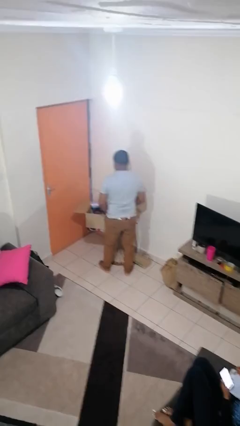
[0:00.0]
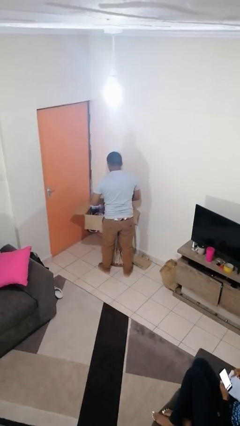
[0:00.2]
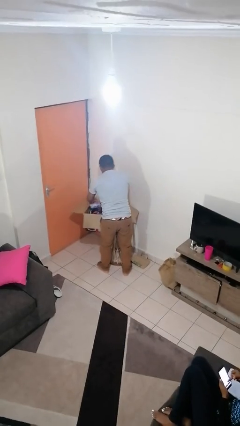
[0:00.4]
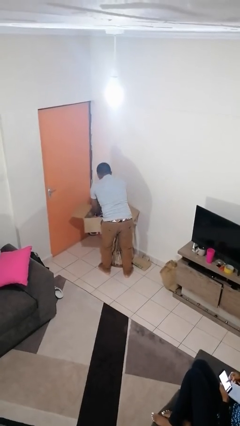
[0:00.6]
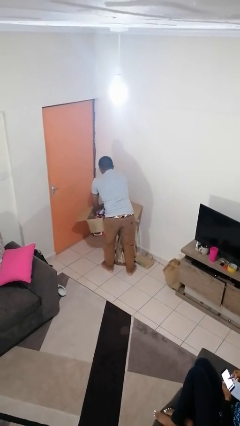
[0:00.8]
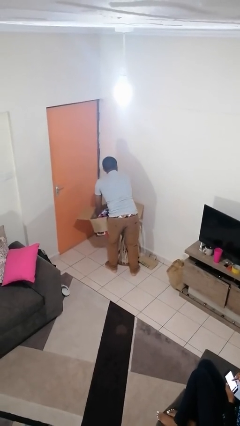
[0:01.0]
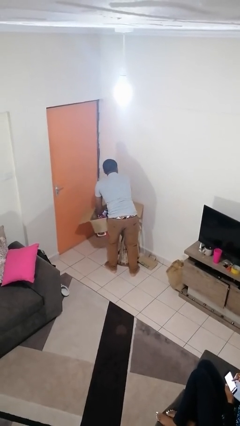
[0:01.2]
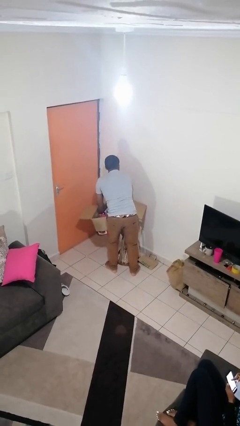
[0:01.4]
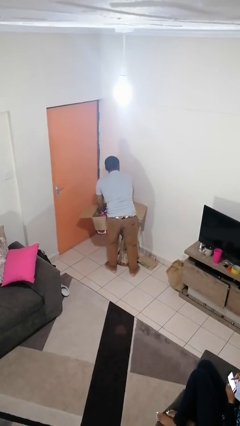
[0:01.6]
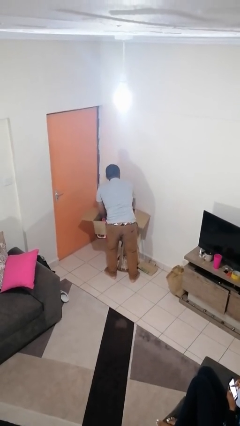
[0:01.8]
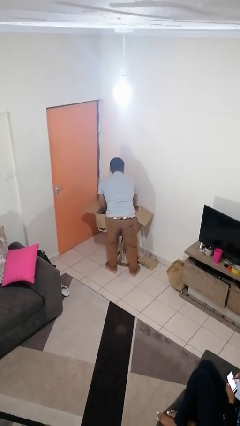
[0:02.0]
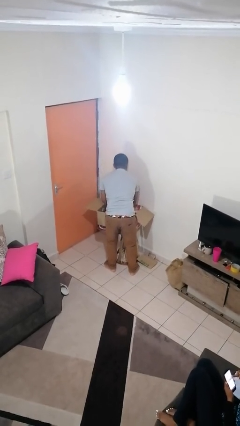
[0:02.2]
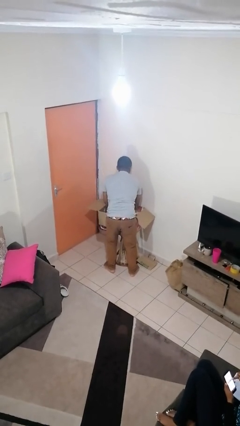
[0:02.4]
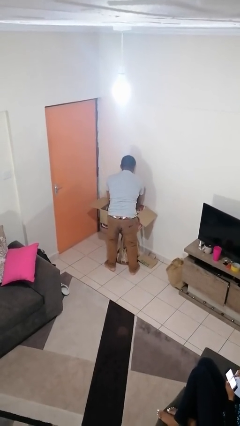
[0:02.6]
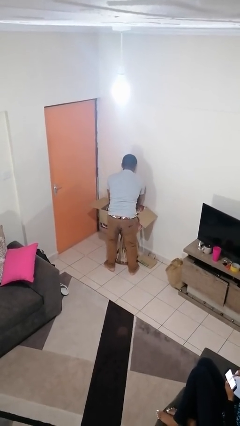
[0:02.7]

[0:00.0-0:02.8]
person searches in box

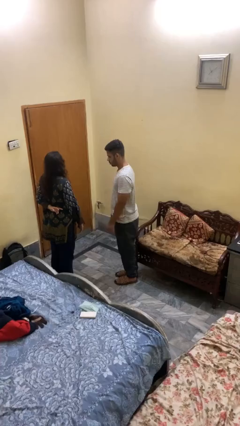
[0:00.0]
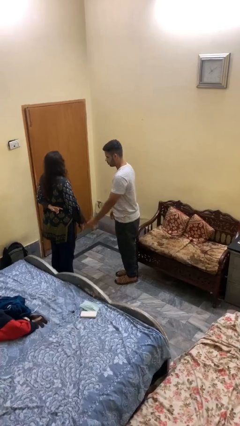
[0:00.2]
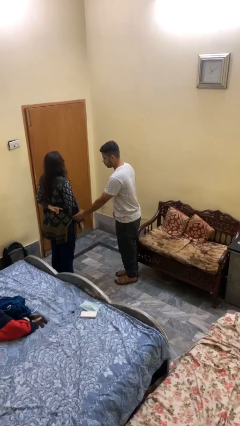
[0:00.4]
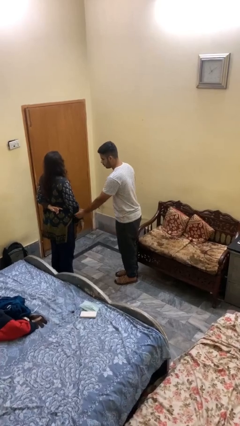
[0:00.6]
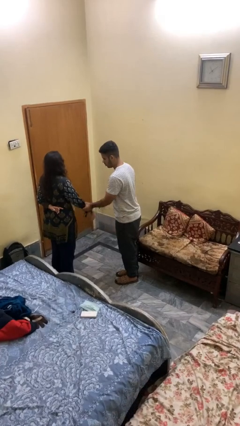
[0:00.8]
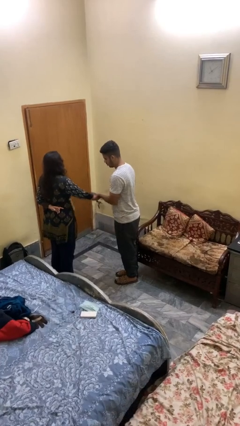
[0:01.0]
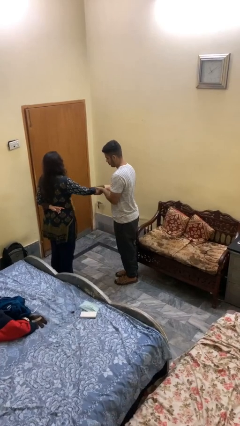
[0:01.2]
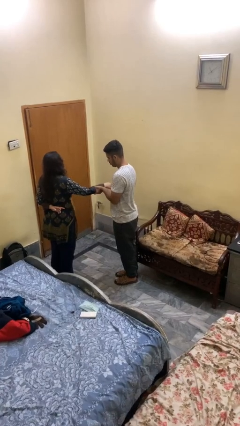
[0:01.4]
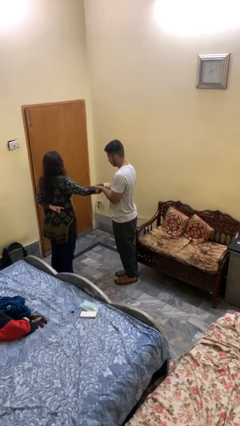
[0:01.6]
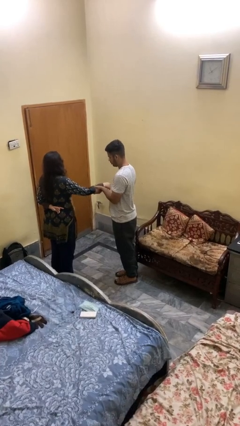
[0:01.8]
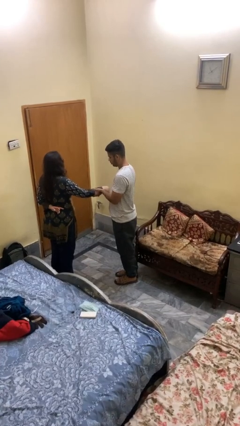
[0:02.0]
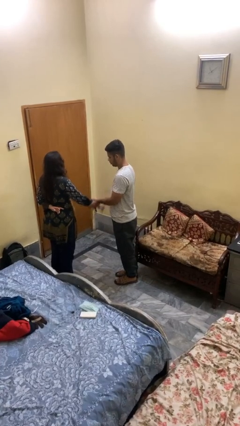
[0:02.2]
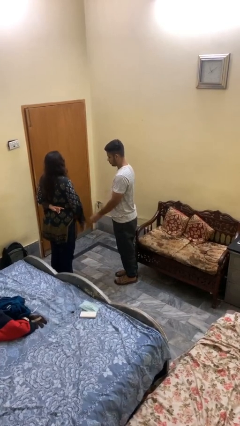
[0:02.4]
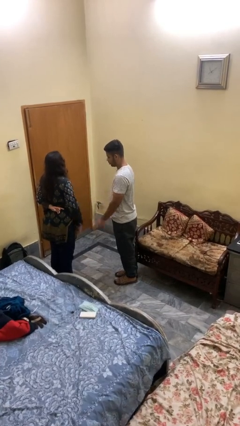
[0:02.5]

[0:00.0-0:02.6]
person grabs person by forearm

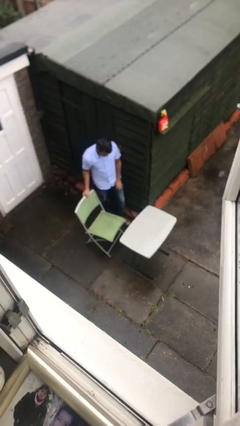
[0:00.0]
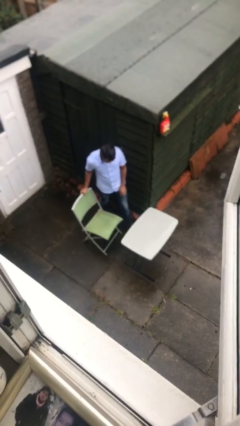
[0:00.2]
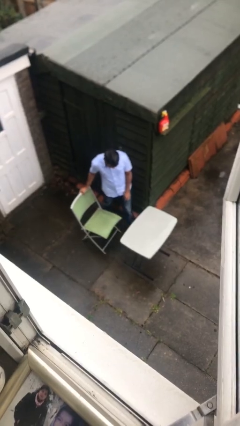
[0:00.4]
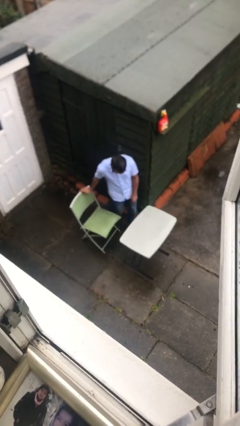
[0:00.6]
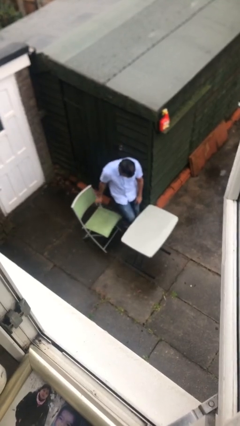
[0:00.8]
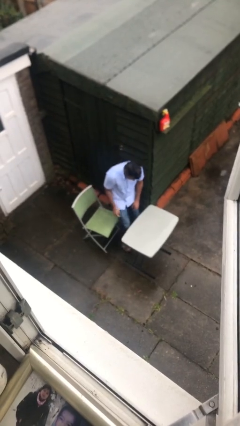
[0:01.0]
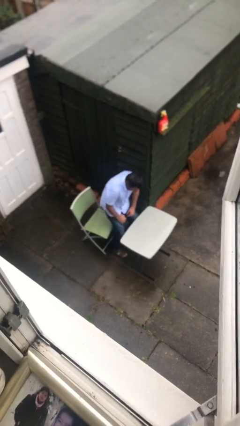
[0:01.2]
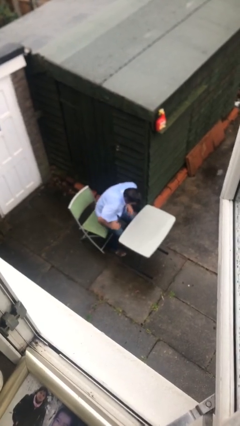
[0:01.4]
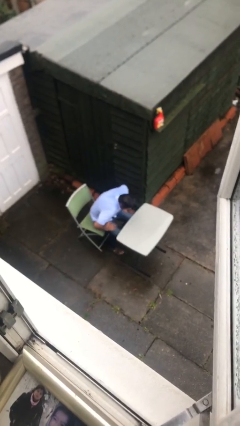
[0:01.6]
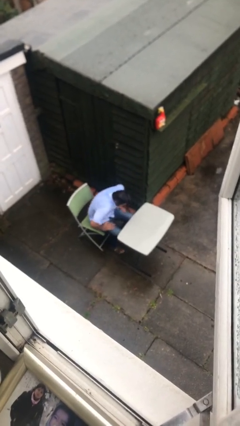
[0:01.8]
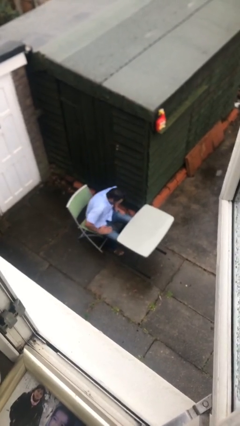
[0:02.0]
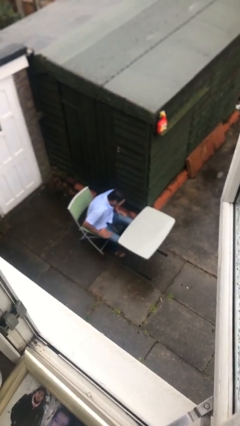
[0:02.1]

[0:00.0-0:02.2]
person sits down

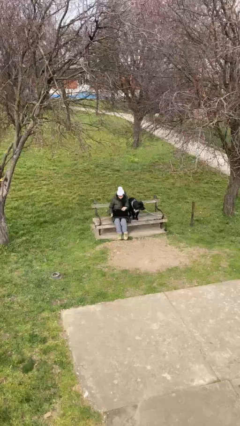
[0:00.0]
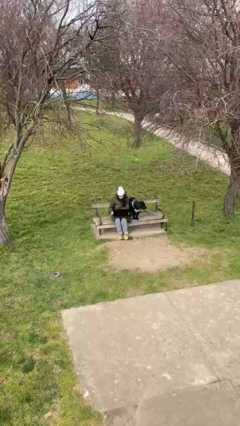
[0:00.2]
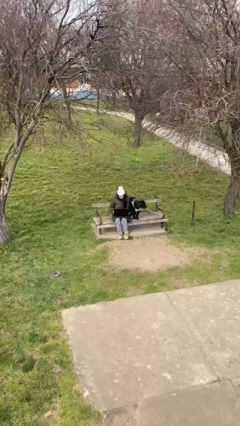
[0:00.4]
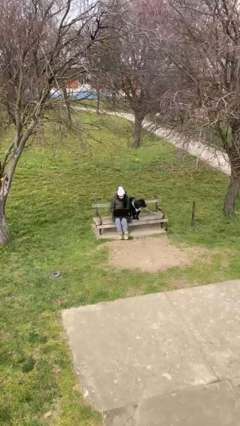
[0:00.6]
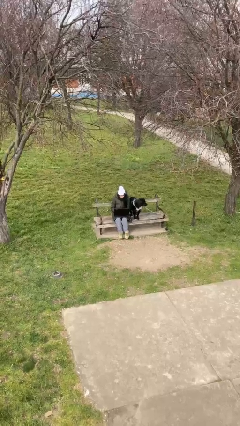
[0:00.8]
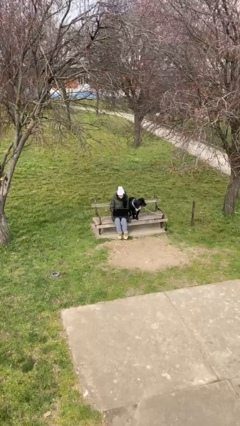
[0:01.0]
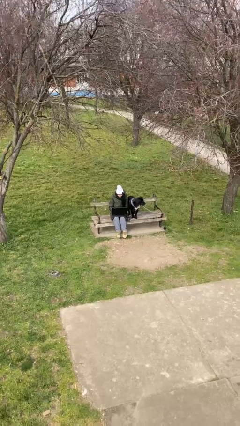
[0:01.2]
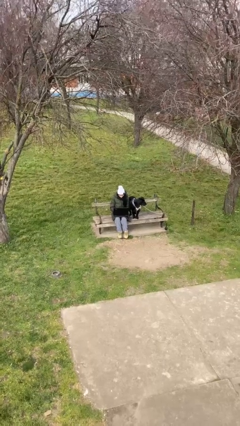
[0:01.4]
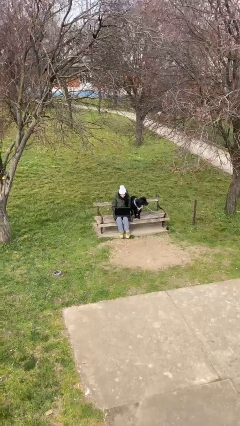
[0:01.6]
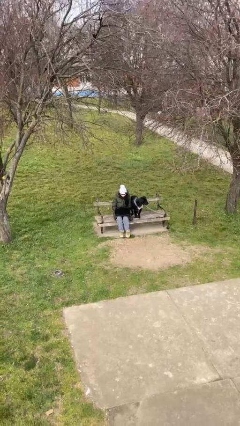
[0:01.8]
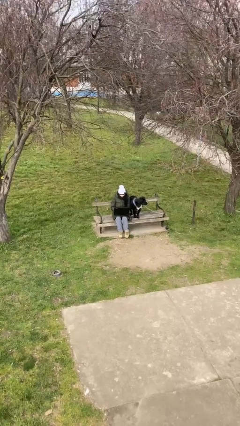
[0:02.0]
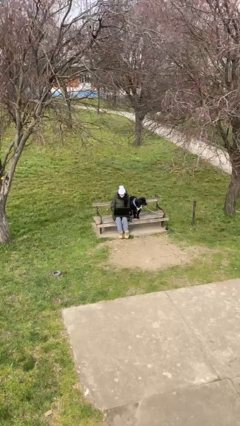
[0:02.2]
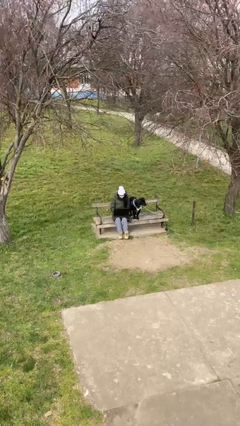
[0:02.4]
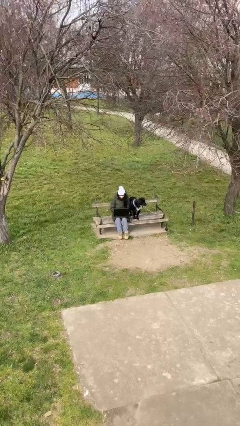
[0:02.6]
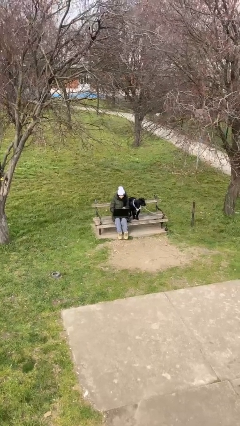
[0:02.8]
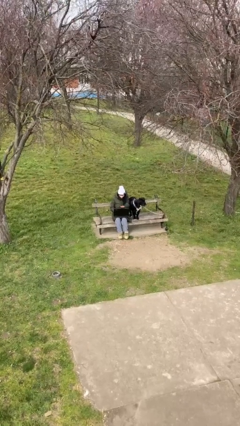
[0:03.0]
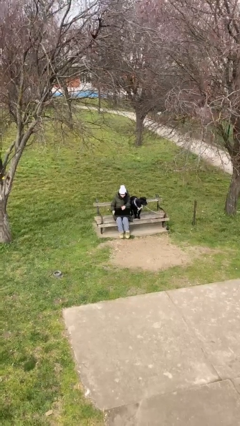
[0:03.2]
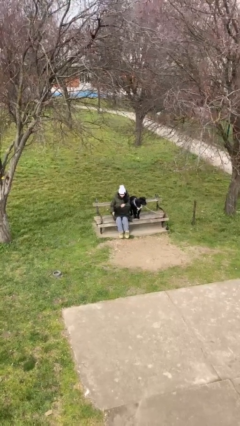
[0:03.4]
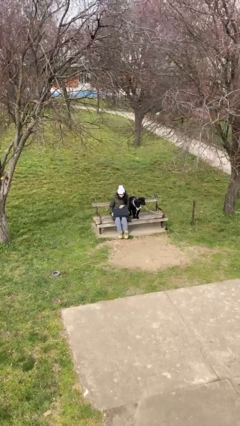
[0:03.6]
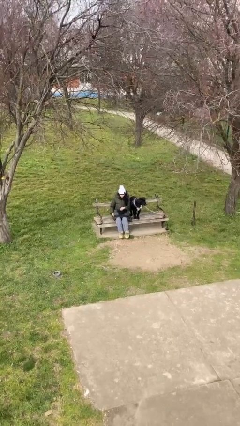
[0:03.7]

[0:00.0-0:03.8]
person interacts with laptop

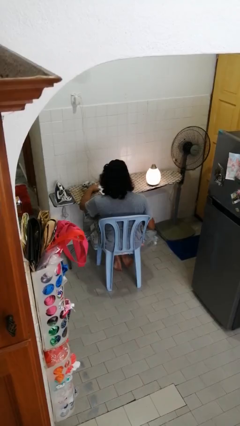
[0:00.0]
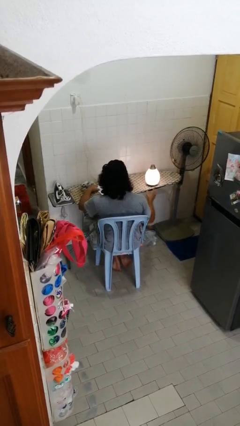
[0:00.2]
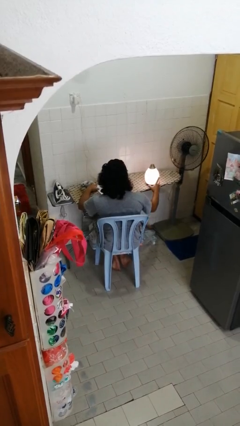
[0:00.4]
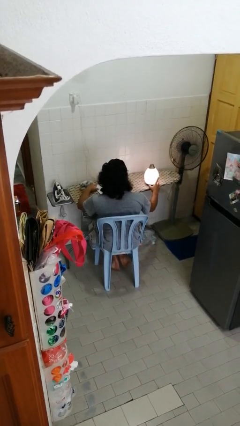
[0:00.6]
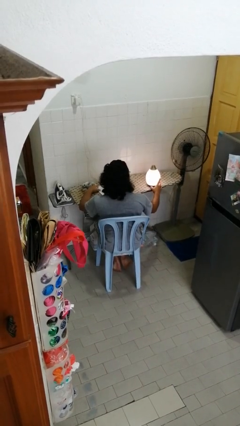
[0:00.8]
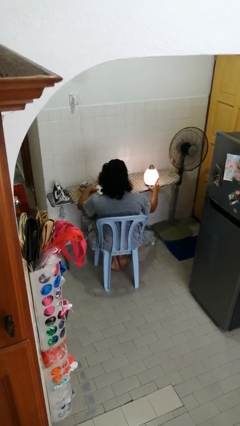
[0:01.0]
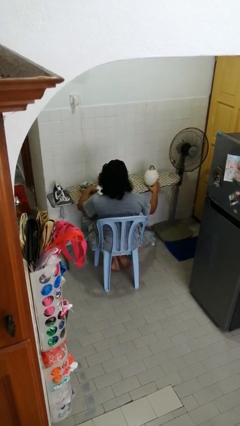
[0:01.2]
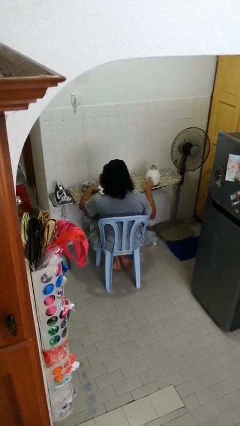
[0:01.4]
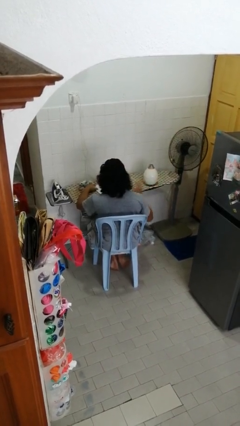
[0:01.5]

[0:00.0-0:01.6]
person turns off lamp

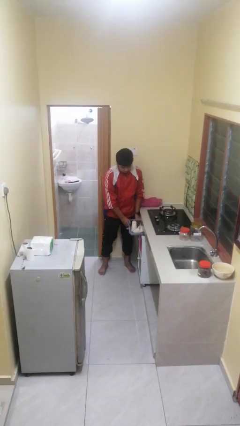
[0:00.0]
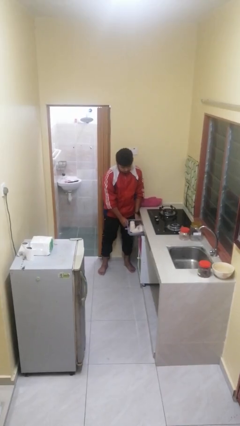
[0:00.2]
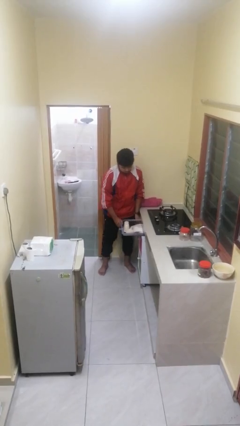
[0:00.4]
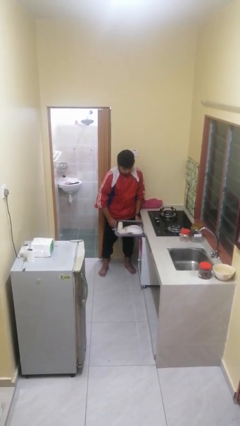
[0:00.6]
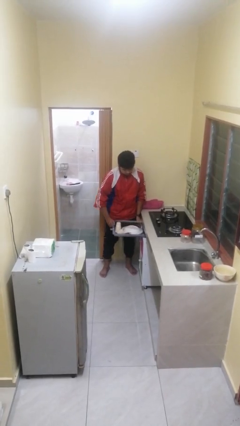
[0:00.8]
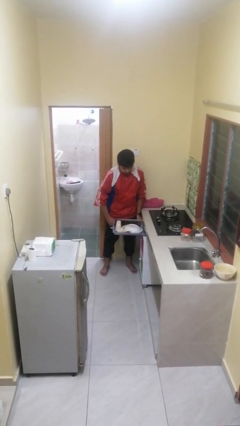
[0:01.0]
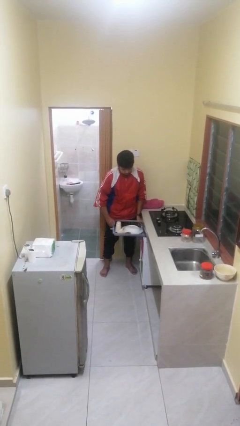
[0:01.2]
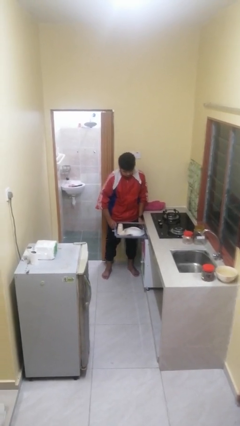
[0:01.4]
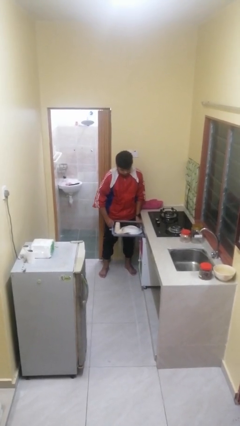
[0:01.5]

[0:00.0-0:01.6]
person opens kitchen drawer

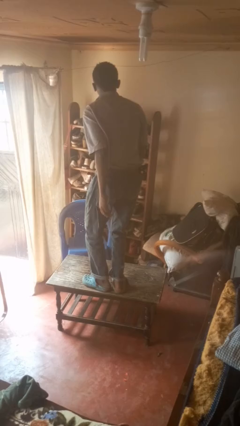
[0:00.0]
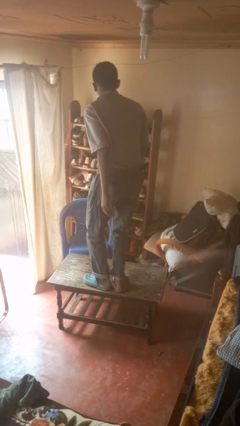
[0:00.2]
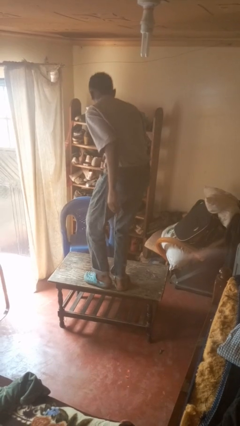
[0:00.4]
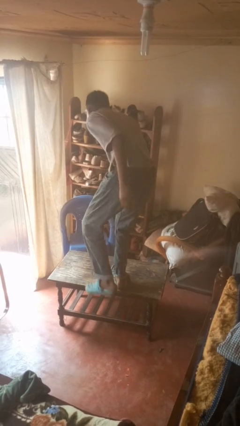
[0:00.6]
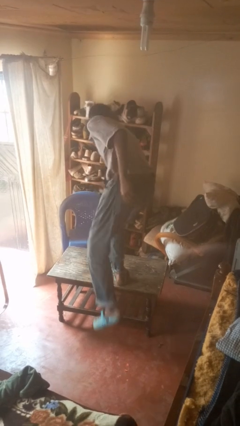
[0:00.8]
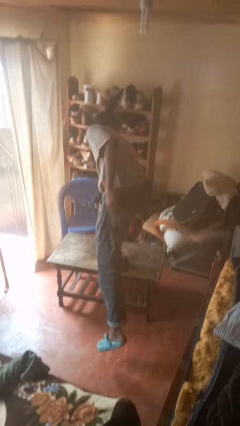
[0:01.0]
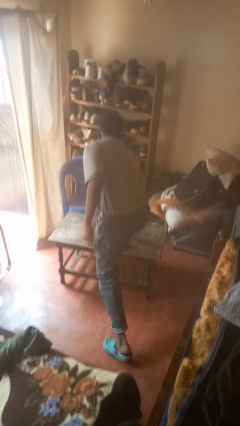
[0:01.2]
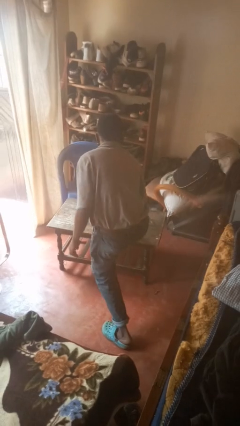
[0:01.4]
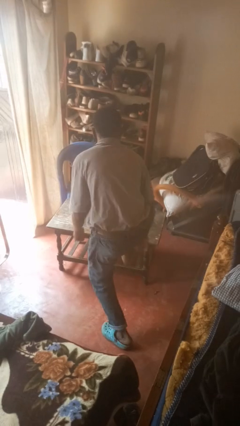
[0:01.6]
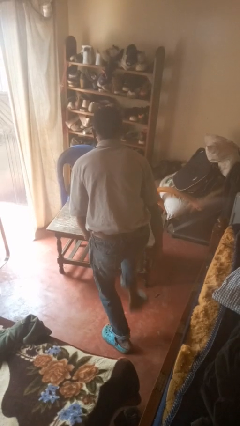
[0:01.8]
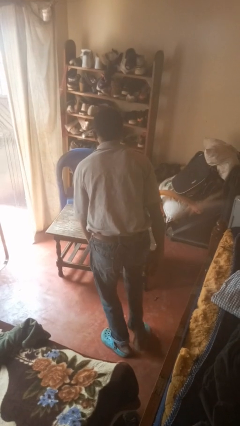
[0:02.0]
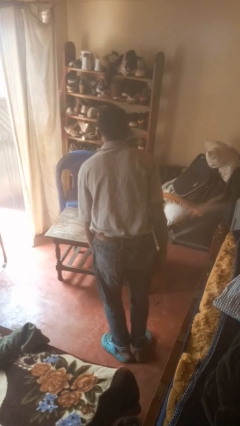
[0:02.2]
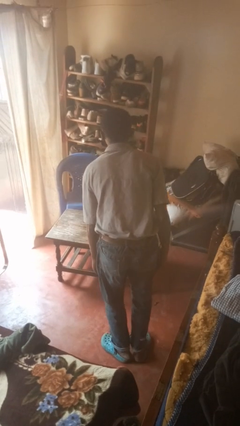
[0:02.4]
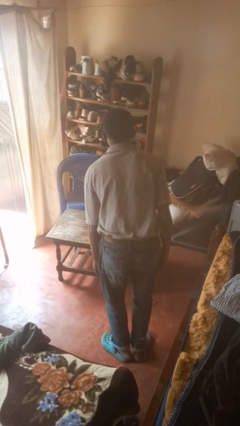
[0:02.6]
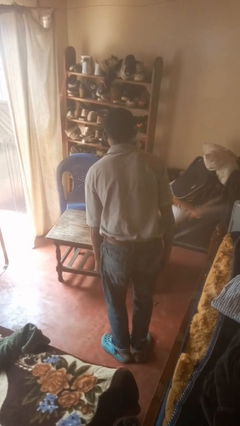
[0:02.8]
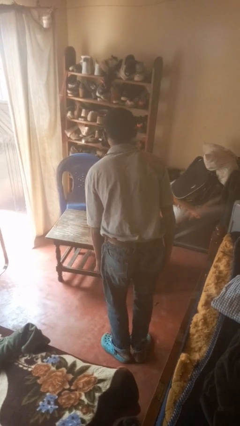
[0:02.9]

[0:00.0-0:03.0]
person climbs off table
